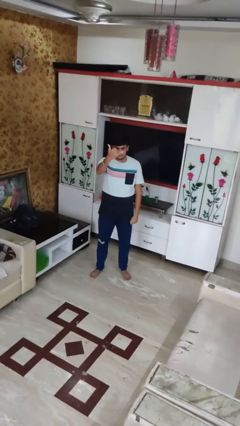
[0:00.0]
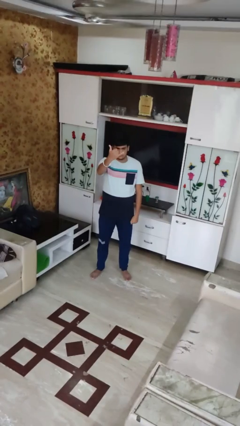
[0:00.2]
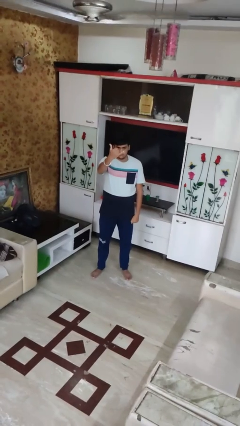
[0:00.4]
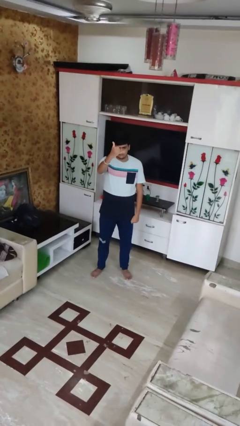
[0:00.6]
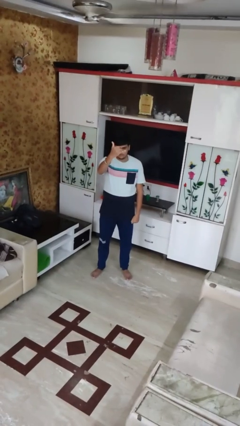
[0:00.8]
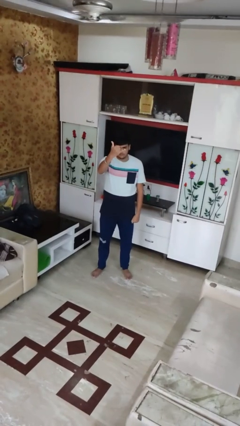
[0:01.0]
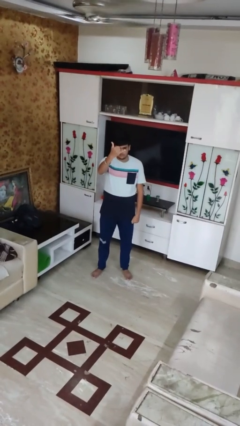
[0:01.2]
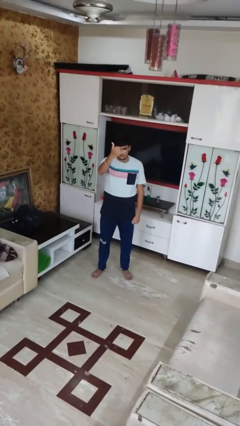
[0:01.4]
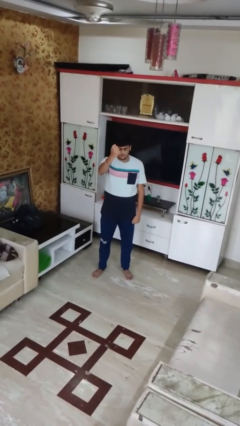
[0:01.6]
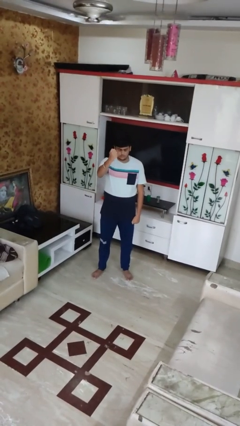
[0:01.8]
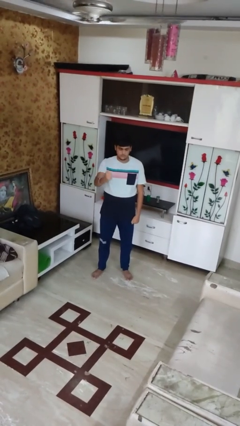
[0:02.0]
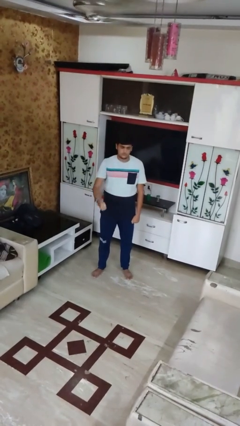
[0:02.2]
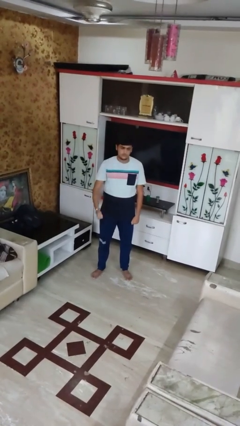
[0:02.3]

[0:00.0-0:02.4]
person gestures hang loose

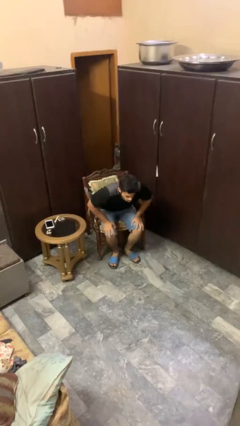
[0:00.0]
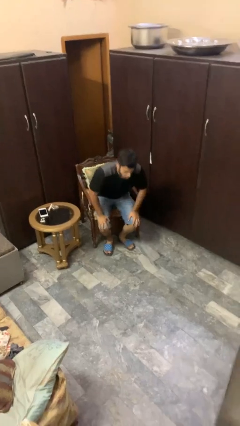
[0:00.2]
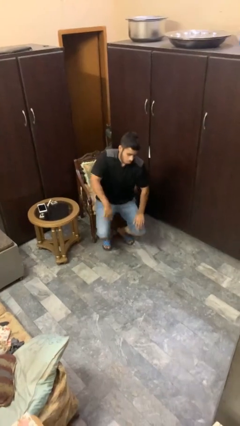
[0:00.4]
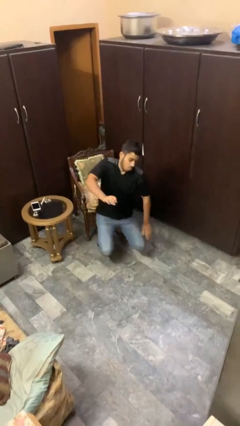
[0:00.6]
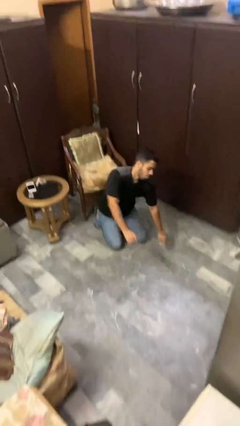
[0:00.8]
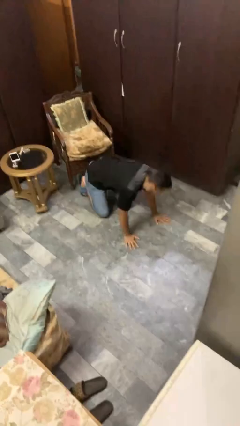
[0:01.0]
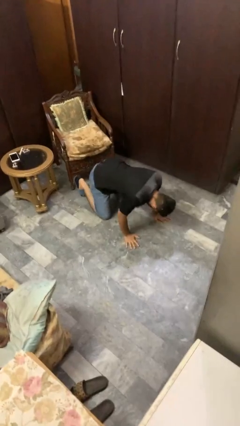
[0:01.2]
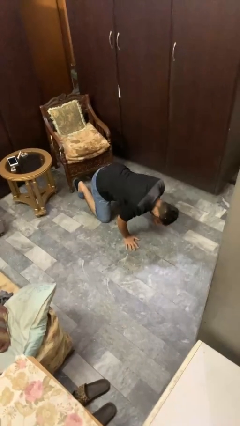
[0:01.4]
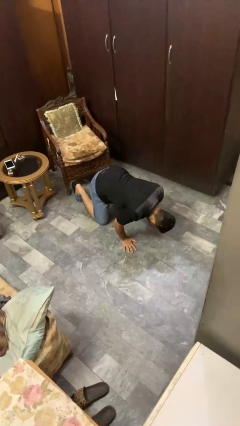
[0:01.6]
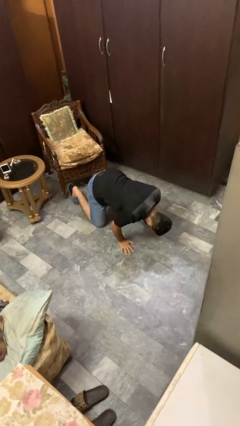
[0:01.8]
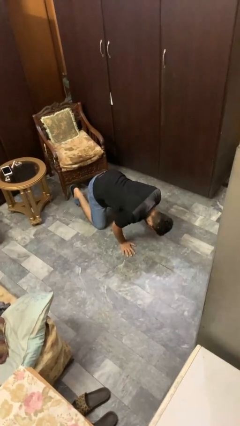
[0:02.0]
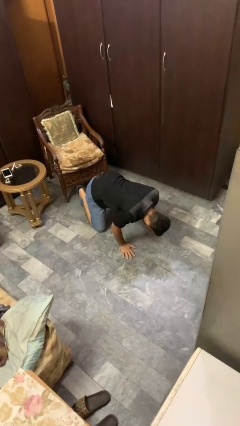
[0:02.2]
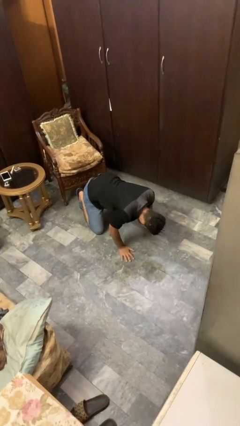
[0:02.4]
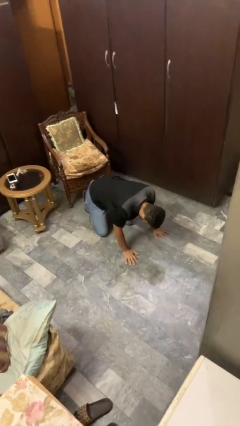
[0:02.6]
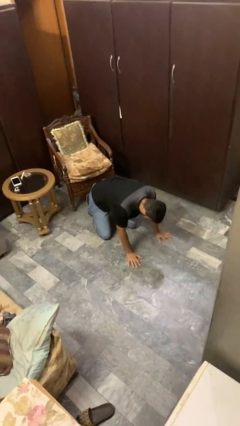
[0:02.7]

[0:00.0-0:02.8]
person falls from chair

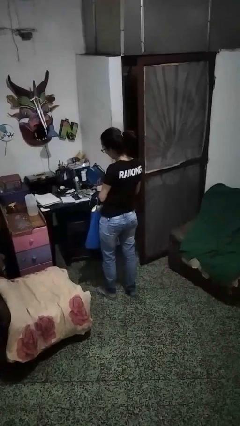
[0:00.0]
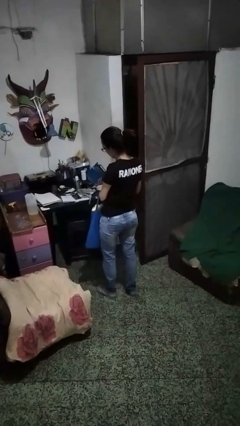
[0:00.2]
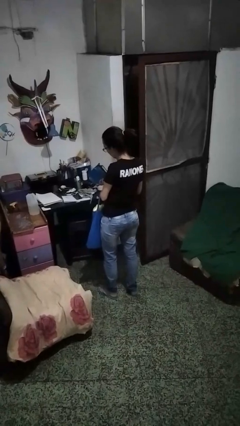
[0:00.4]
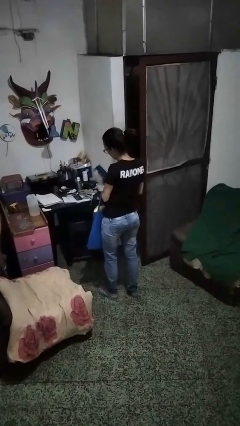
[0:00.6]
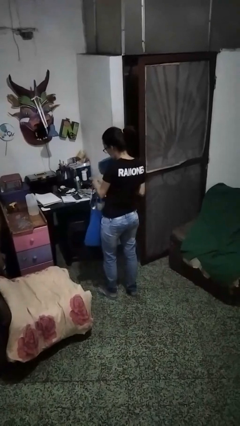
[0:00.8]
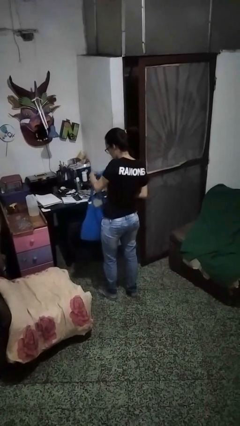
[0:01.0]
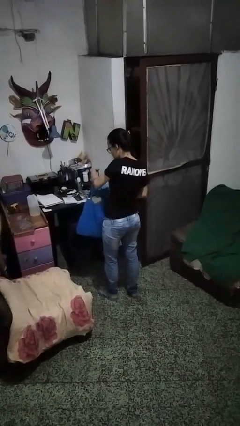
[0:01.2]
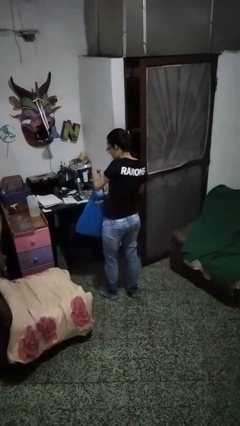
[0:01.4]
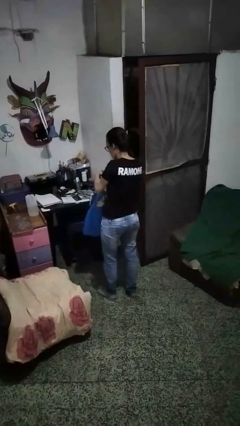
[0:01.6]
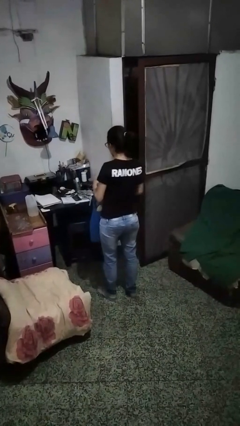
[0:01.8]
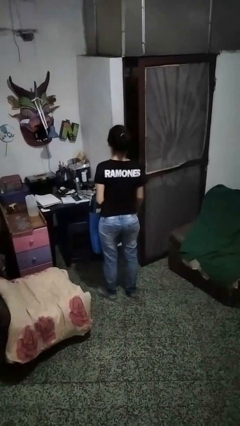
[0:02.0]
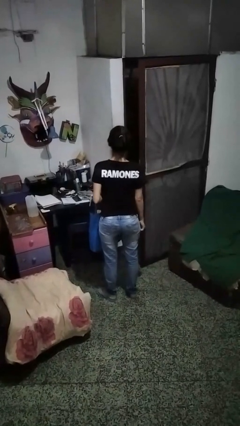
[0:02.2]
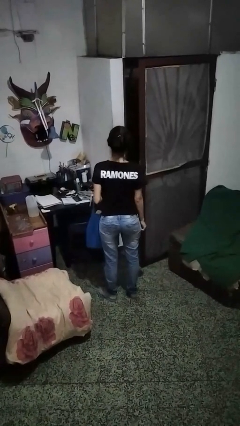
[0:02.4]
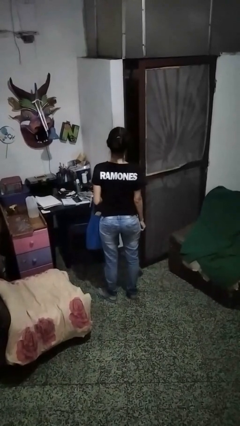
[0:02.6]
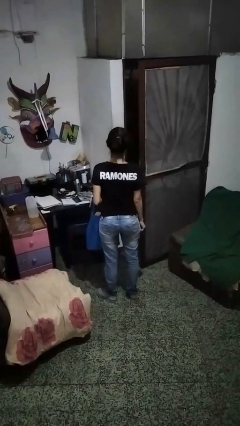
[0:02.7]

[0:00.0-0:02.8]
person puts object into bag

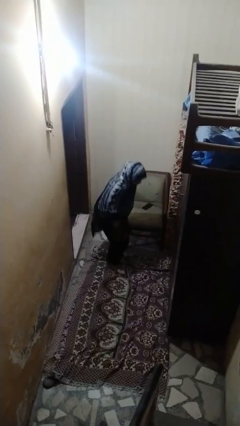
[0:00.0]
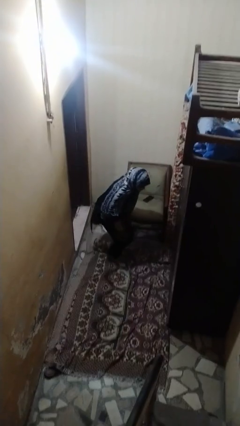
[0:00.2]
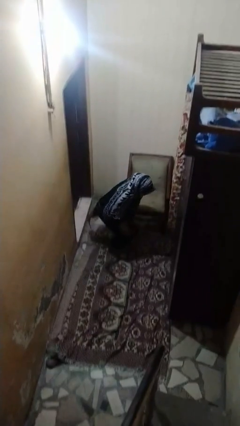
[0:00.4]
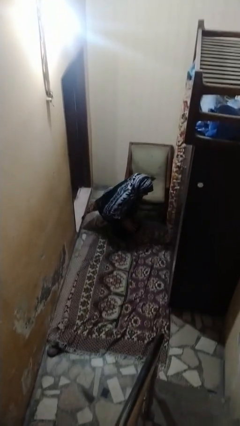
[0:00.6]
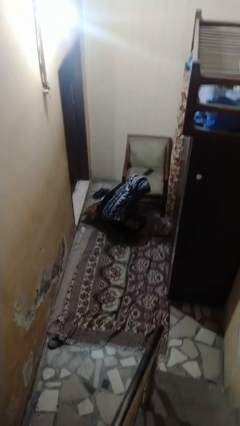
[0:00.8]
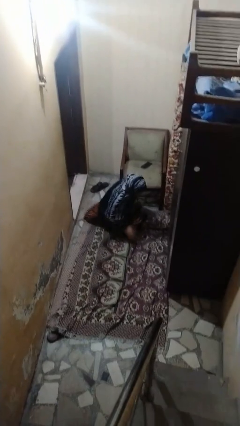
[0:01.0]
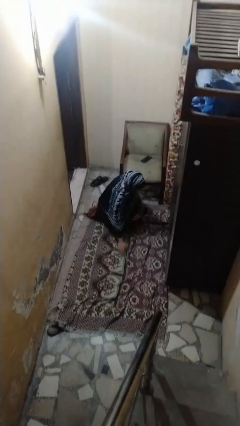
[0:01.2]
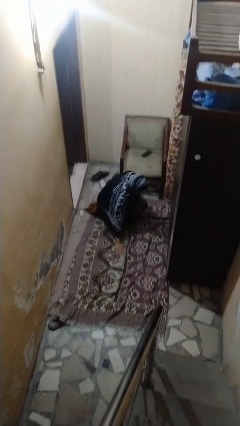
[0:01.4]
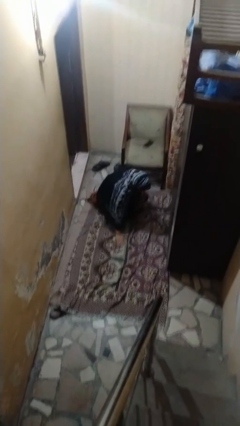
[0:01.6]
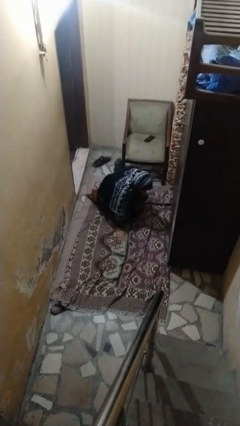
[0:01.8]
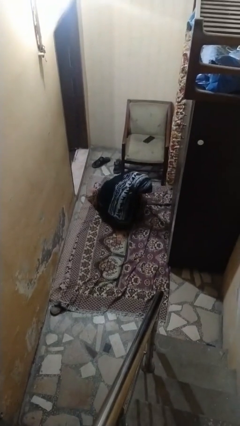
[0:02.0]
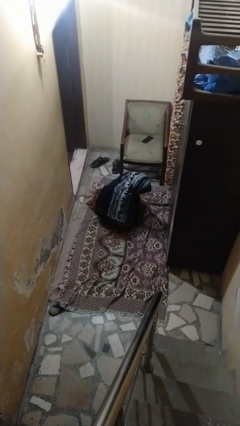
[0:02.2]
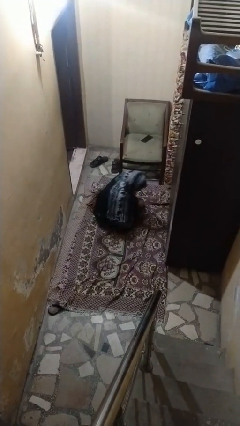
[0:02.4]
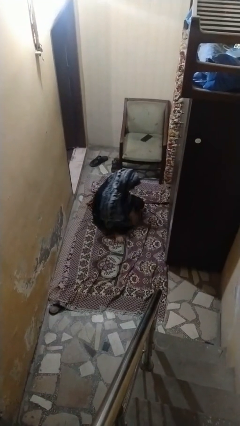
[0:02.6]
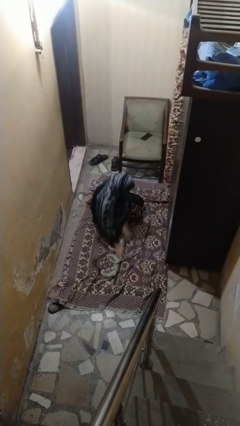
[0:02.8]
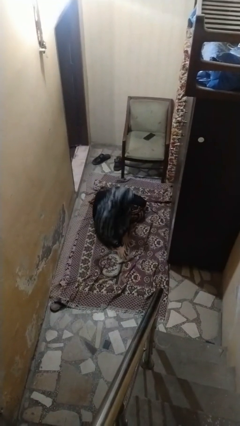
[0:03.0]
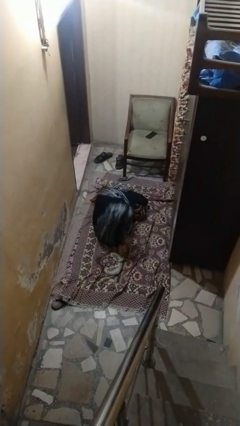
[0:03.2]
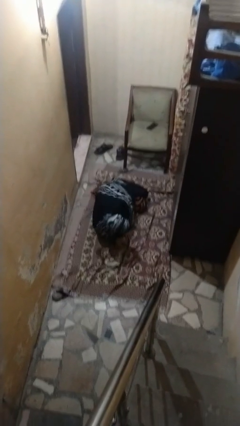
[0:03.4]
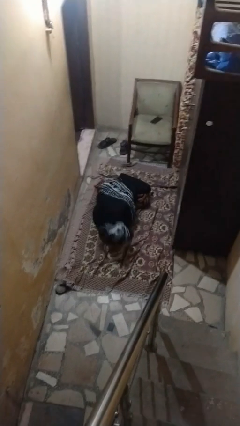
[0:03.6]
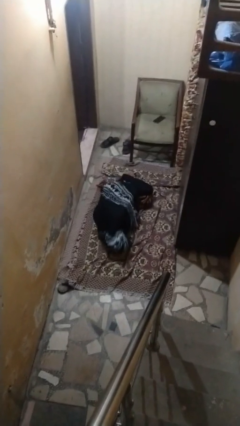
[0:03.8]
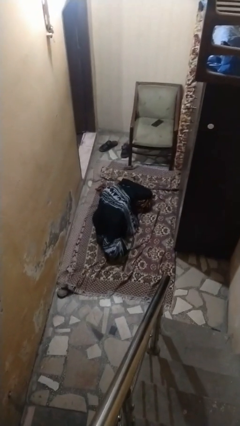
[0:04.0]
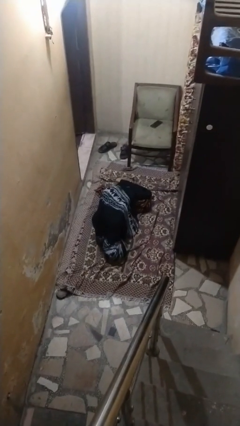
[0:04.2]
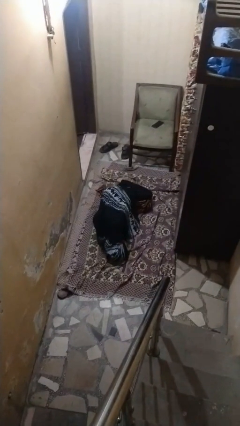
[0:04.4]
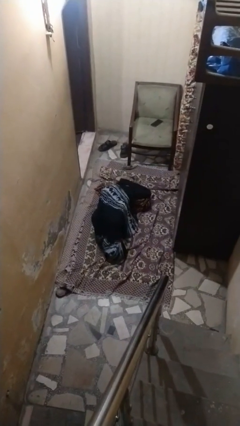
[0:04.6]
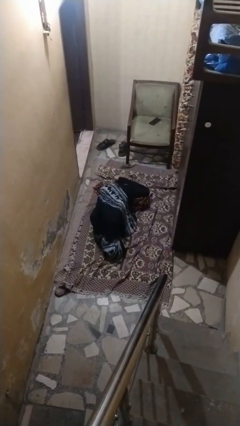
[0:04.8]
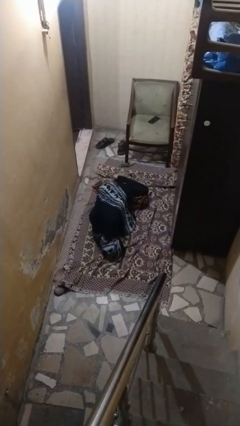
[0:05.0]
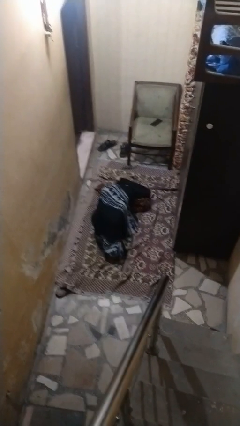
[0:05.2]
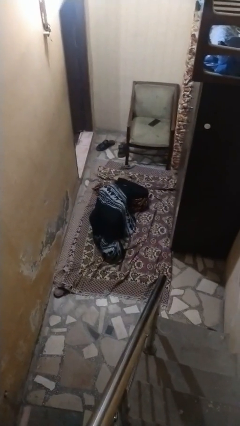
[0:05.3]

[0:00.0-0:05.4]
person falls while standing

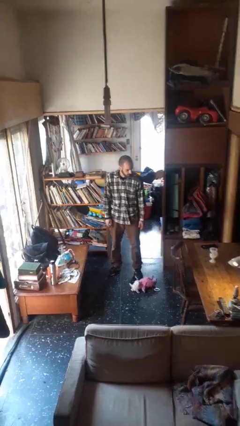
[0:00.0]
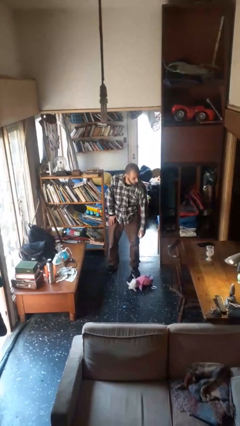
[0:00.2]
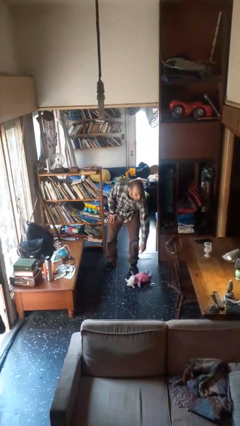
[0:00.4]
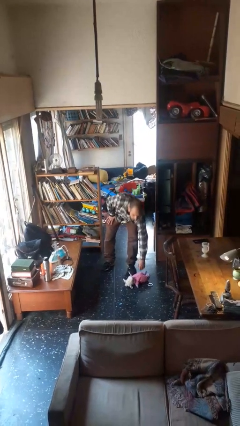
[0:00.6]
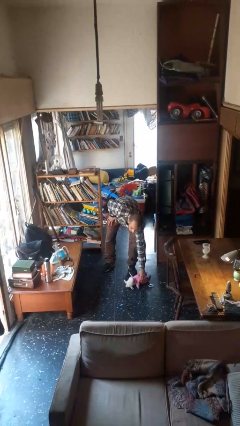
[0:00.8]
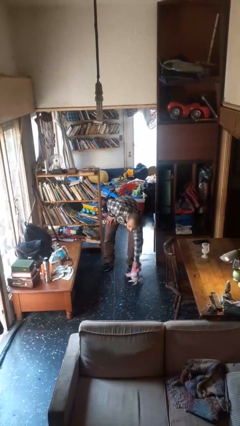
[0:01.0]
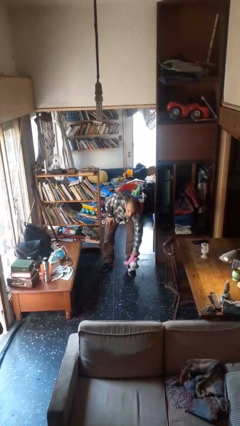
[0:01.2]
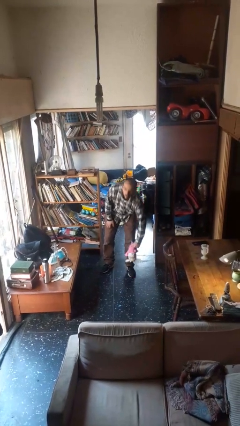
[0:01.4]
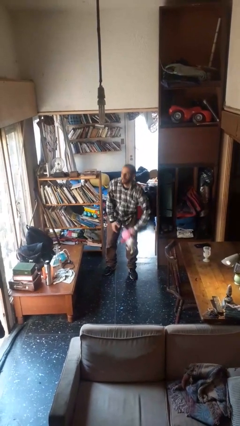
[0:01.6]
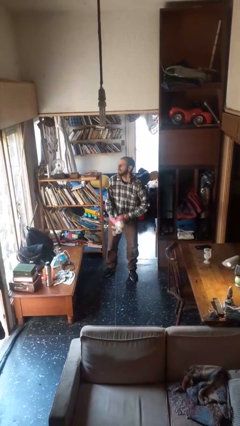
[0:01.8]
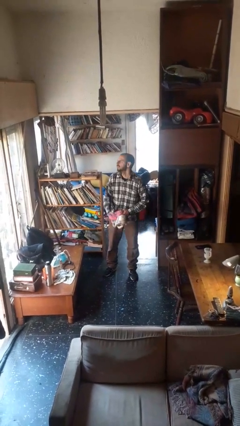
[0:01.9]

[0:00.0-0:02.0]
person picks up object from floor

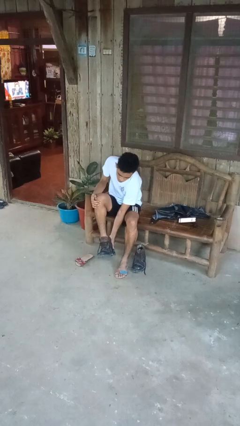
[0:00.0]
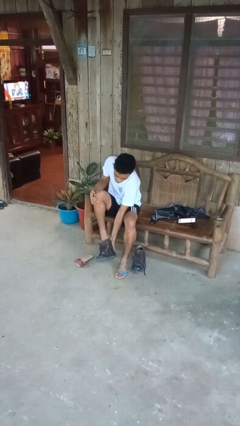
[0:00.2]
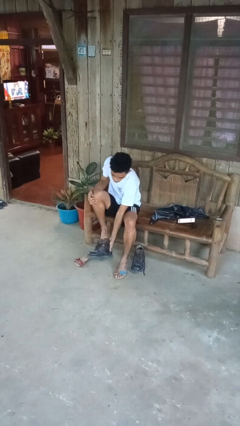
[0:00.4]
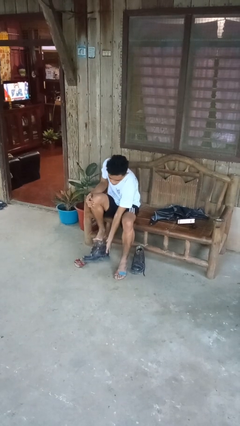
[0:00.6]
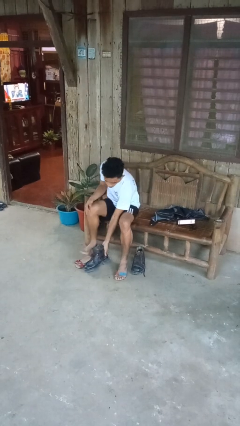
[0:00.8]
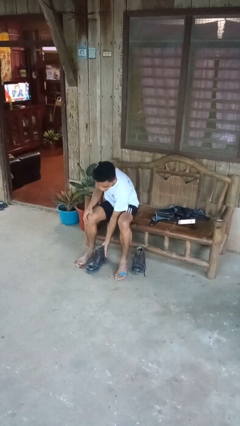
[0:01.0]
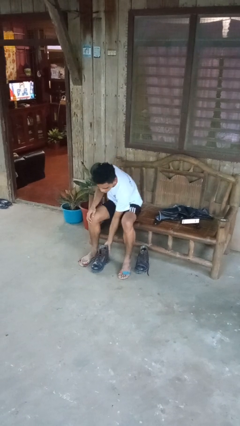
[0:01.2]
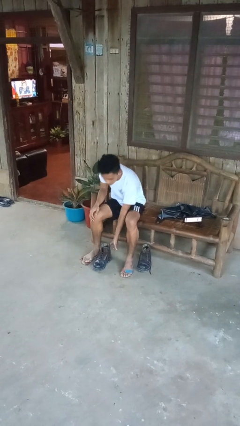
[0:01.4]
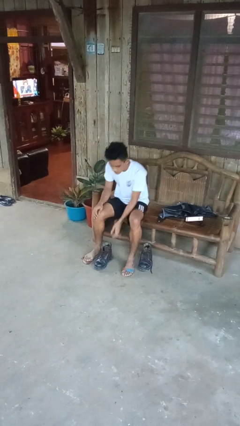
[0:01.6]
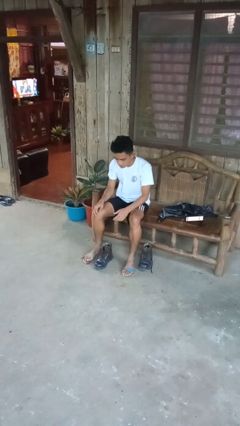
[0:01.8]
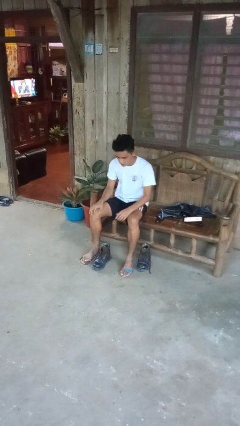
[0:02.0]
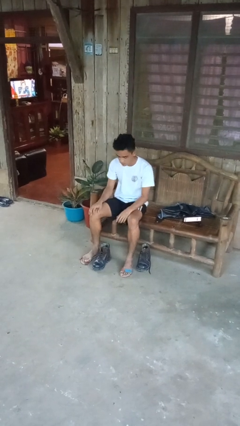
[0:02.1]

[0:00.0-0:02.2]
person takes off boots
